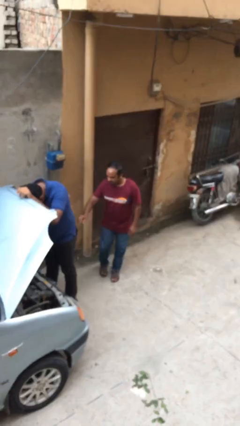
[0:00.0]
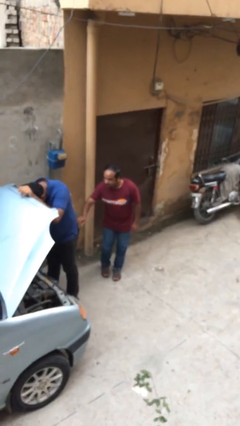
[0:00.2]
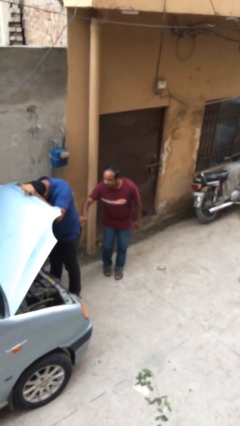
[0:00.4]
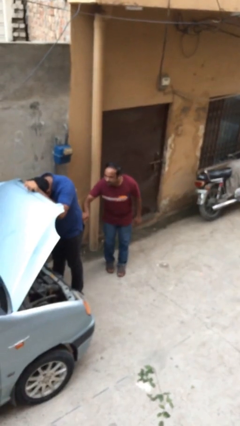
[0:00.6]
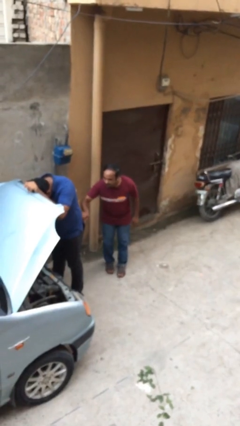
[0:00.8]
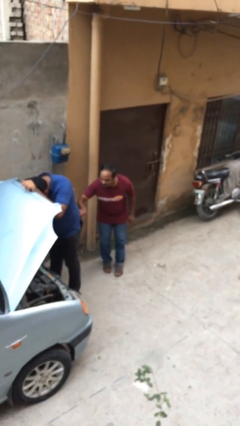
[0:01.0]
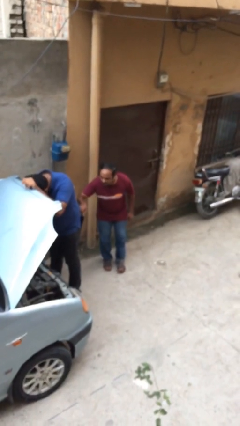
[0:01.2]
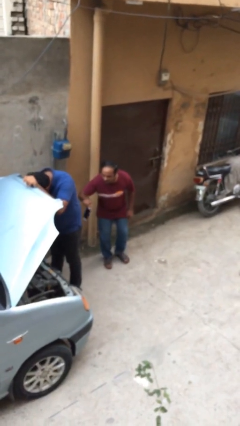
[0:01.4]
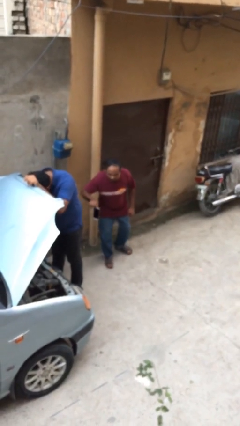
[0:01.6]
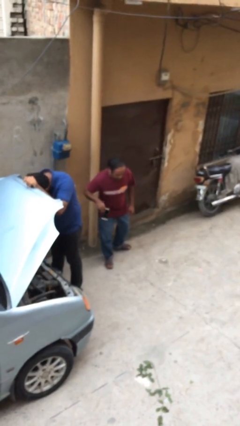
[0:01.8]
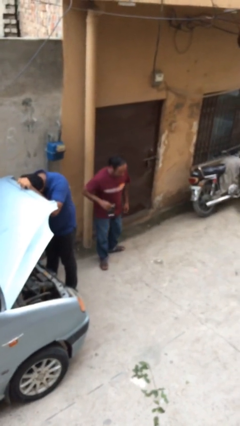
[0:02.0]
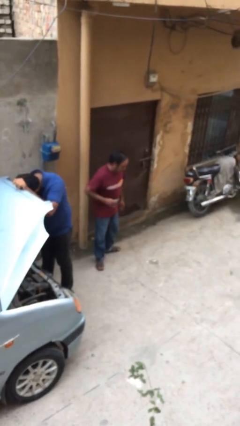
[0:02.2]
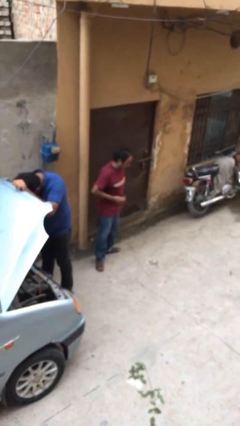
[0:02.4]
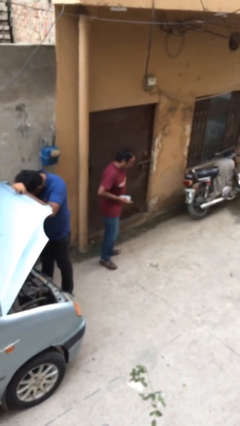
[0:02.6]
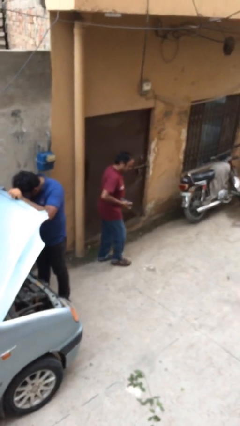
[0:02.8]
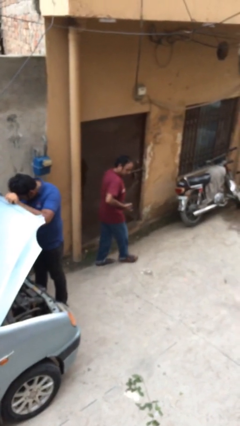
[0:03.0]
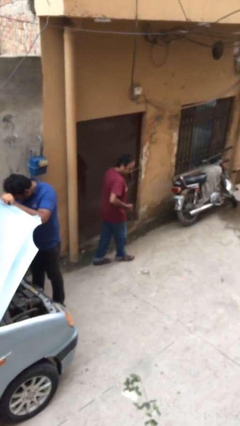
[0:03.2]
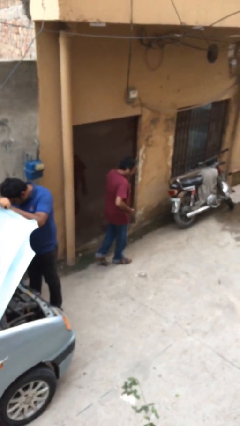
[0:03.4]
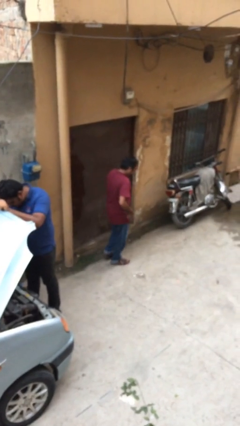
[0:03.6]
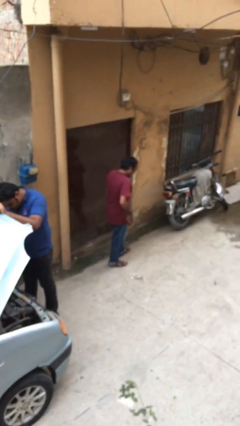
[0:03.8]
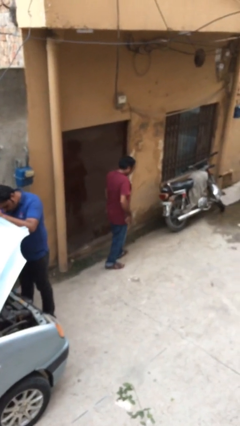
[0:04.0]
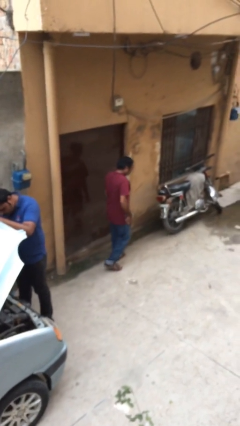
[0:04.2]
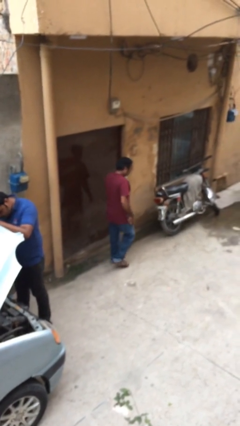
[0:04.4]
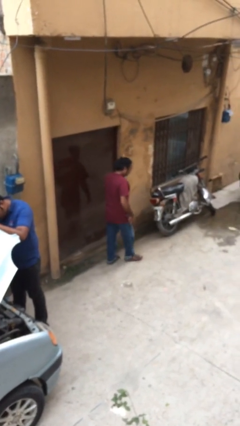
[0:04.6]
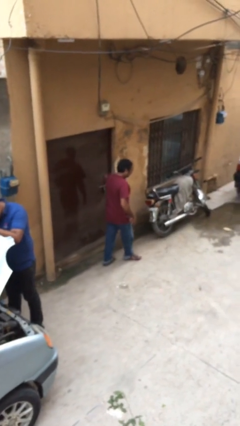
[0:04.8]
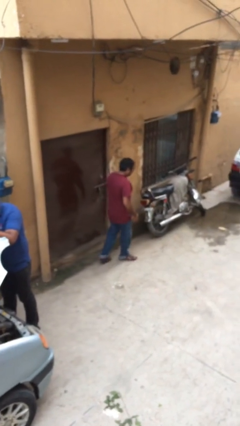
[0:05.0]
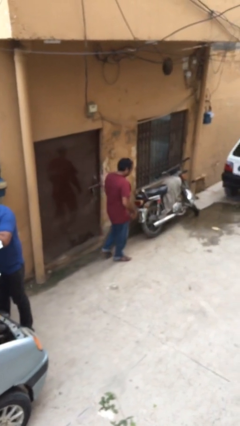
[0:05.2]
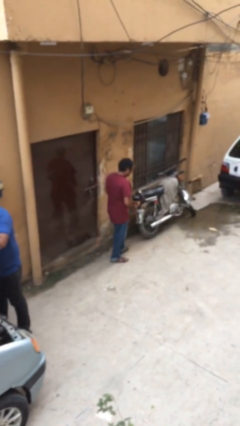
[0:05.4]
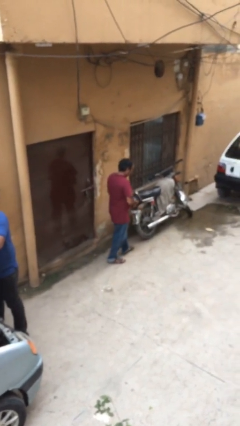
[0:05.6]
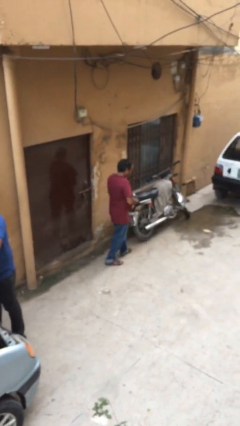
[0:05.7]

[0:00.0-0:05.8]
person steals object from person

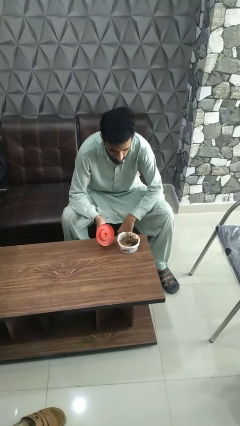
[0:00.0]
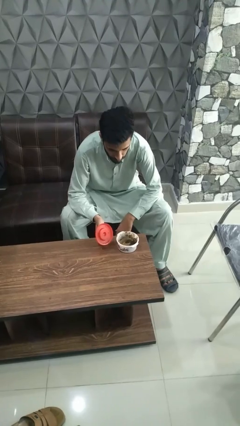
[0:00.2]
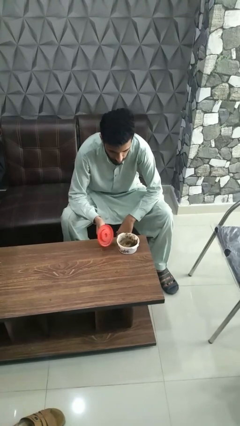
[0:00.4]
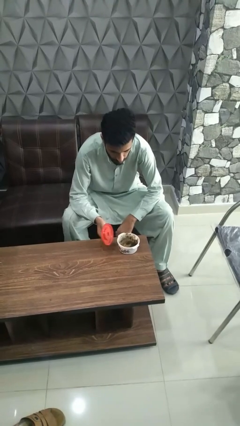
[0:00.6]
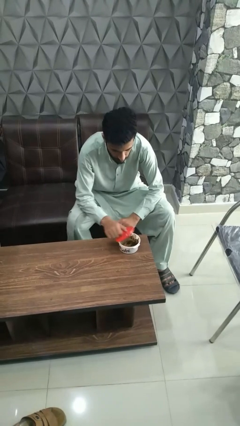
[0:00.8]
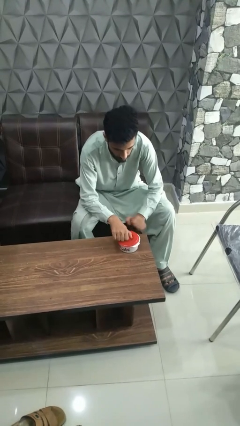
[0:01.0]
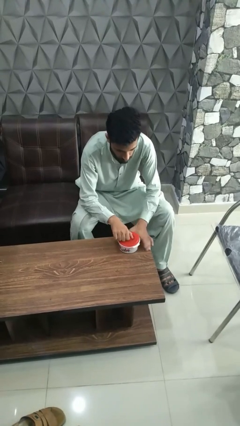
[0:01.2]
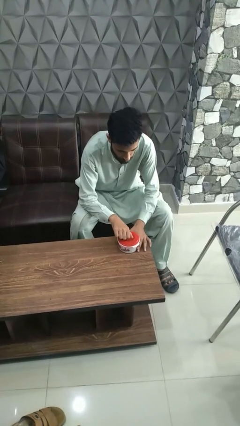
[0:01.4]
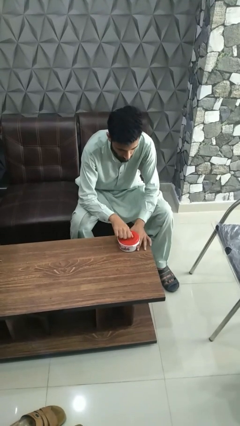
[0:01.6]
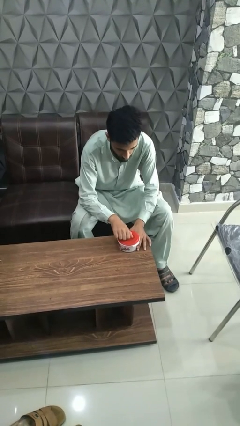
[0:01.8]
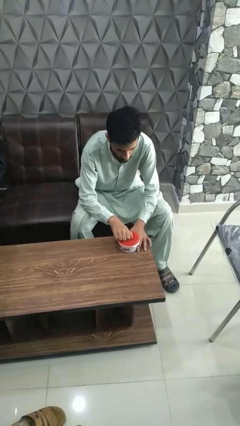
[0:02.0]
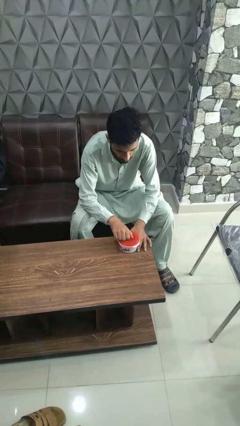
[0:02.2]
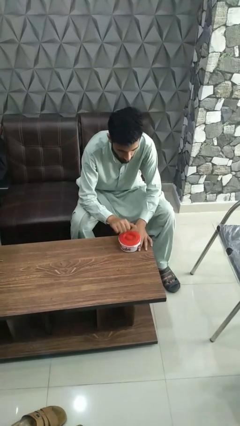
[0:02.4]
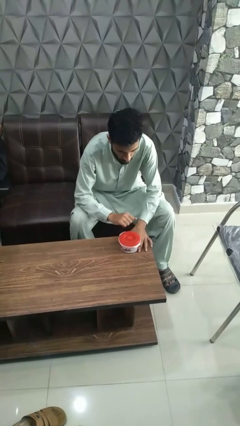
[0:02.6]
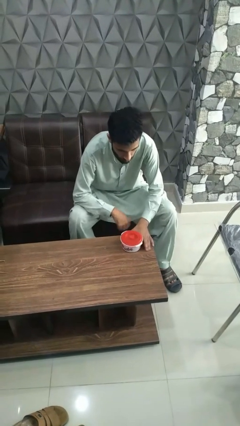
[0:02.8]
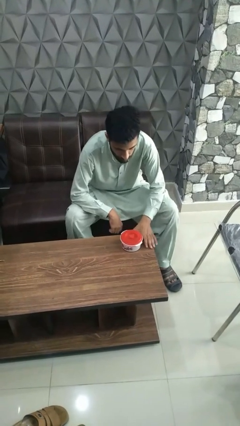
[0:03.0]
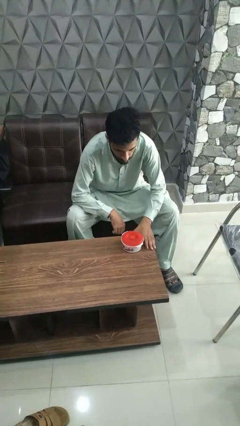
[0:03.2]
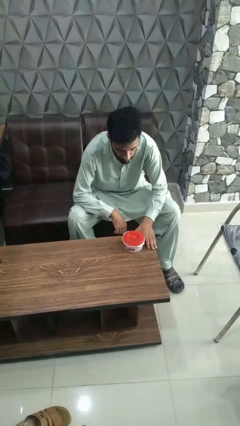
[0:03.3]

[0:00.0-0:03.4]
person closes jar

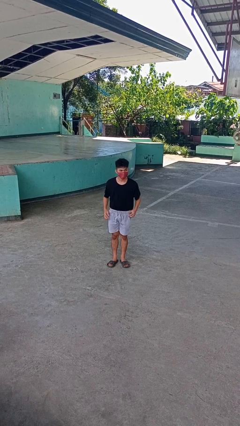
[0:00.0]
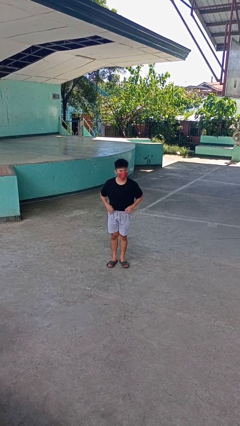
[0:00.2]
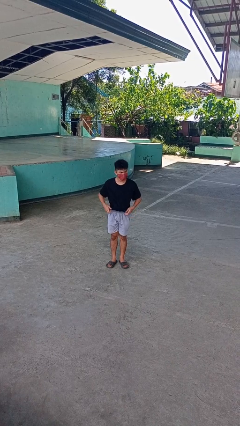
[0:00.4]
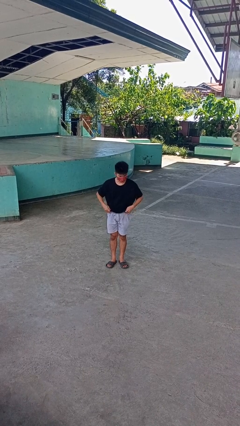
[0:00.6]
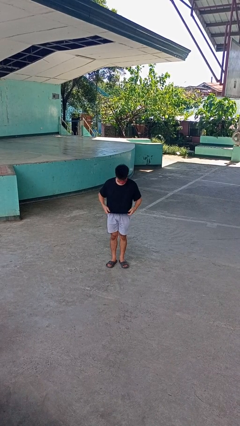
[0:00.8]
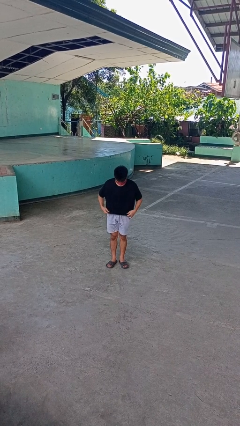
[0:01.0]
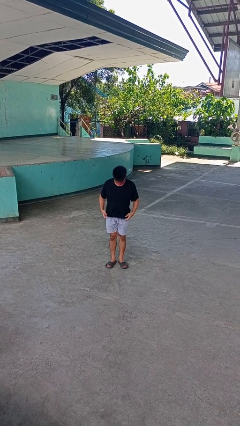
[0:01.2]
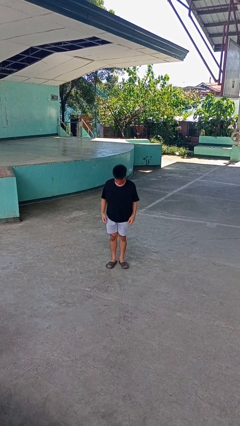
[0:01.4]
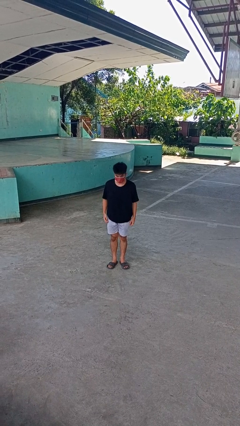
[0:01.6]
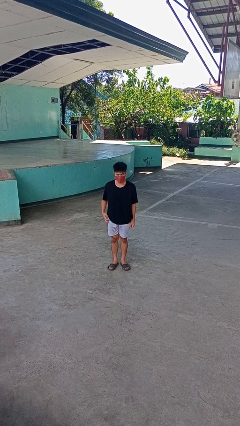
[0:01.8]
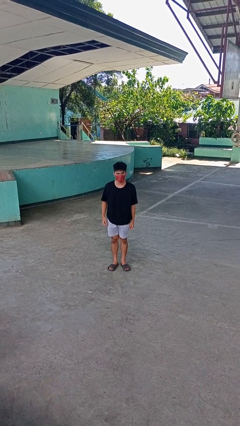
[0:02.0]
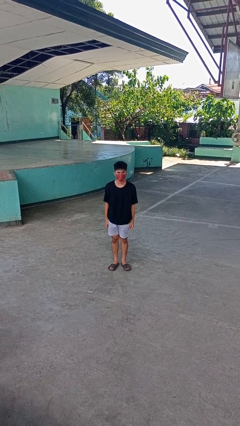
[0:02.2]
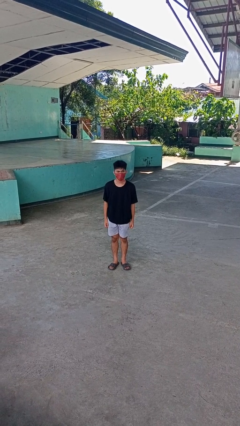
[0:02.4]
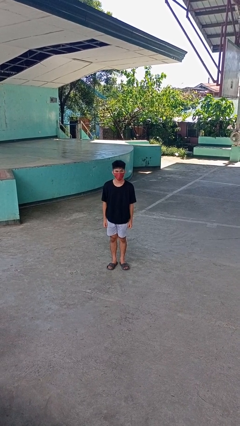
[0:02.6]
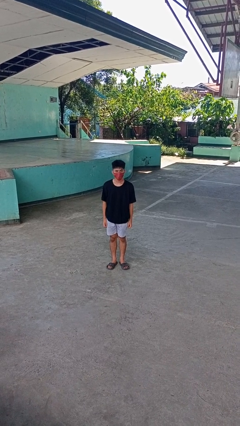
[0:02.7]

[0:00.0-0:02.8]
person untucks shirt

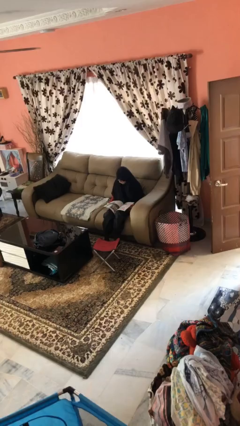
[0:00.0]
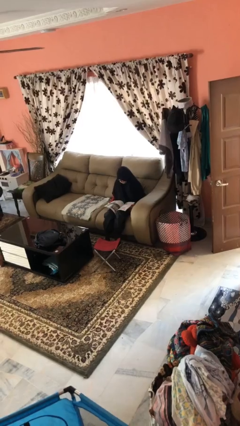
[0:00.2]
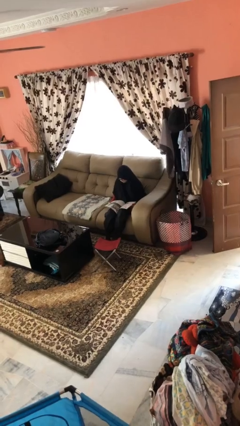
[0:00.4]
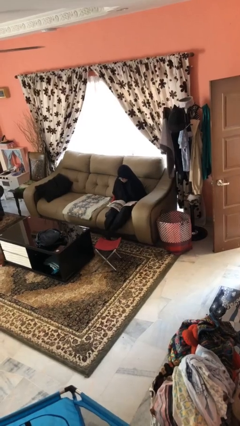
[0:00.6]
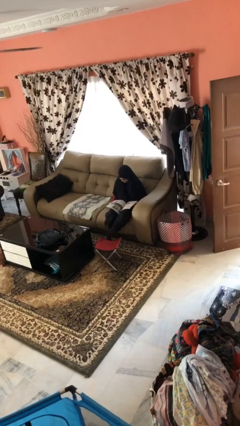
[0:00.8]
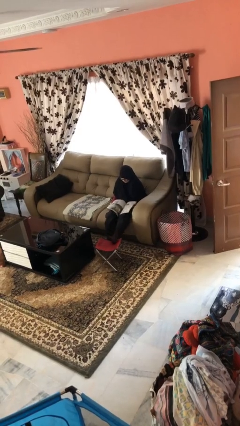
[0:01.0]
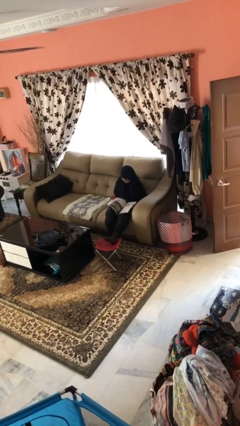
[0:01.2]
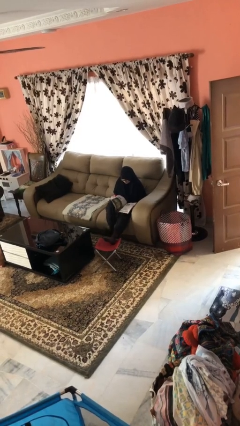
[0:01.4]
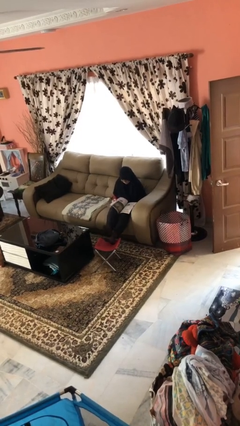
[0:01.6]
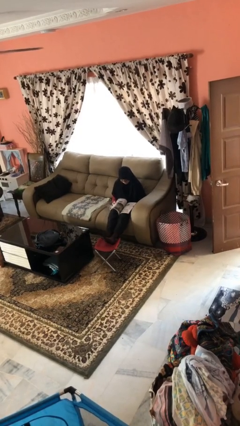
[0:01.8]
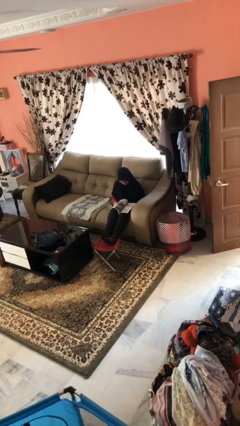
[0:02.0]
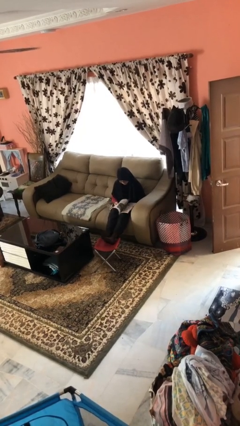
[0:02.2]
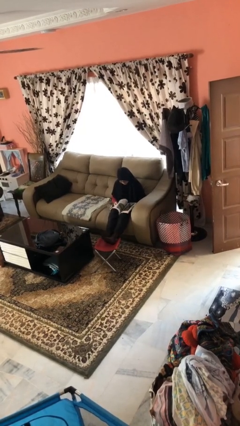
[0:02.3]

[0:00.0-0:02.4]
person puts feet up

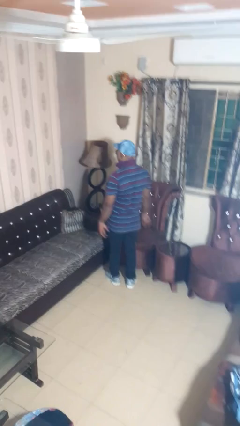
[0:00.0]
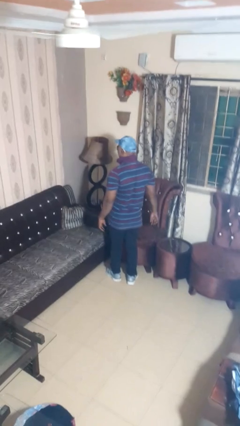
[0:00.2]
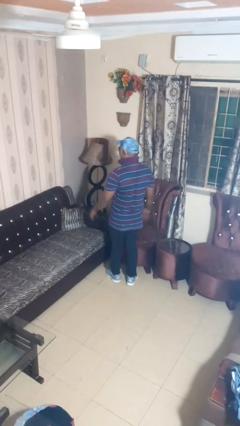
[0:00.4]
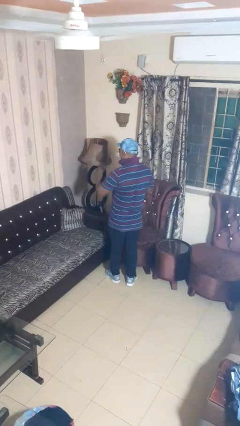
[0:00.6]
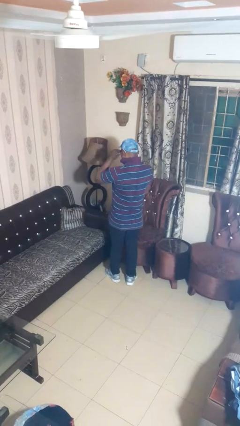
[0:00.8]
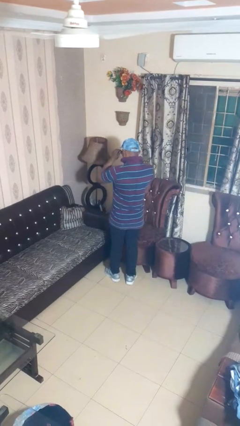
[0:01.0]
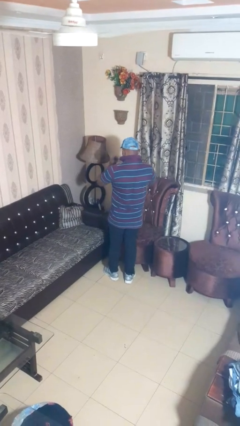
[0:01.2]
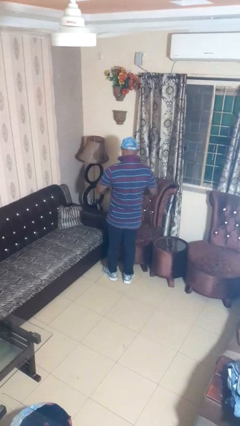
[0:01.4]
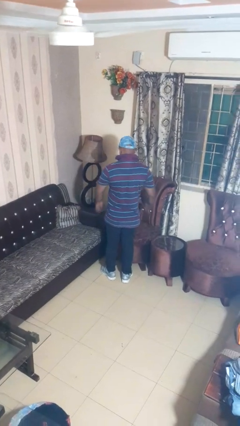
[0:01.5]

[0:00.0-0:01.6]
person takes off sunglasses

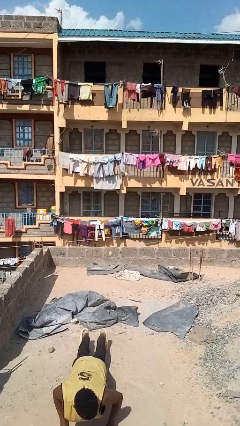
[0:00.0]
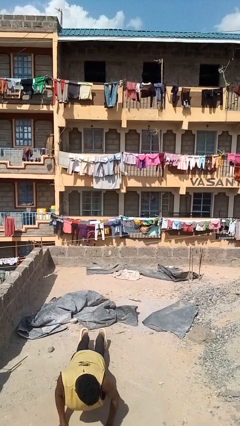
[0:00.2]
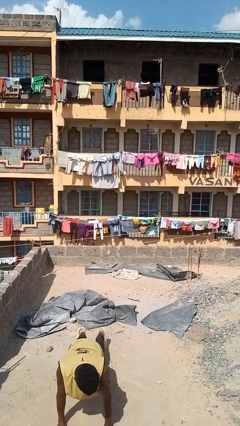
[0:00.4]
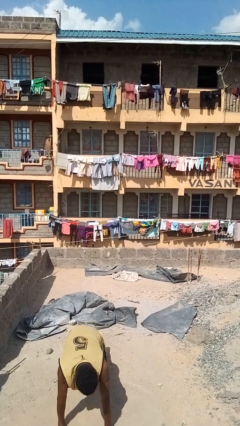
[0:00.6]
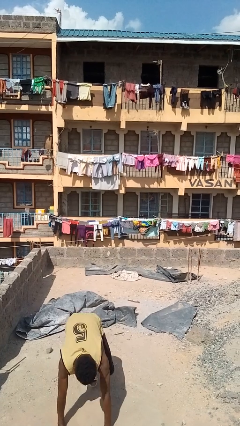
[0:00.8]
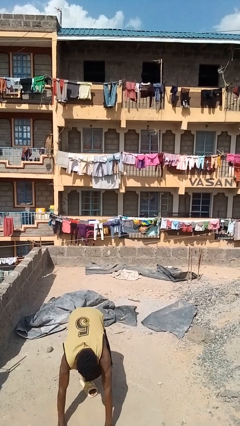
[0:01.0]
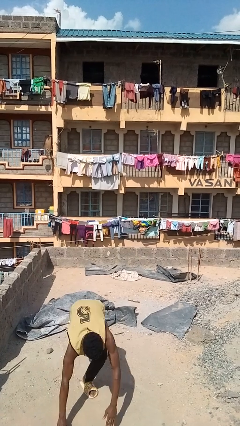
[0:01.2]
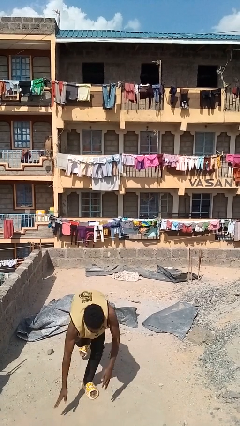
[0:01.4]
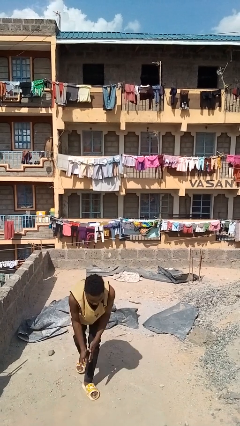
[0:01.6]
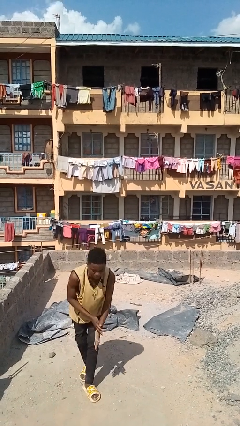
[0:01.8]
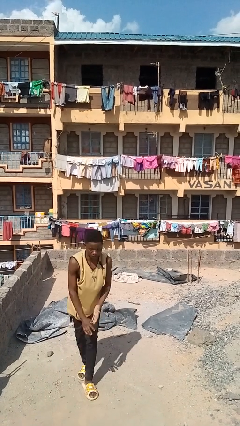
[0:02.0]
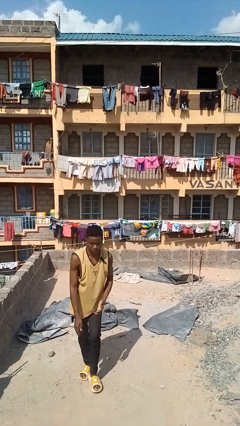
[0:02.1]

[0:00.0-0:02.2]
person stands up from floor
